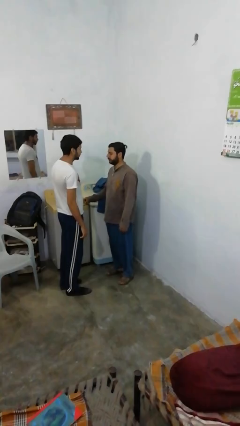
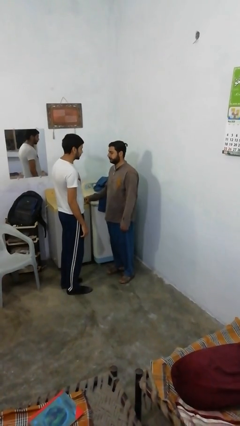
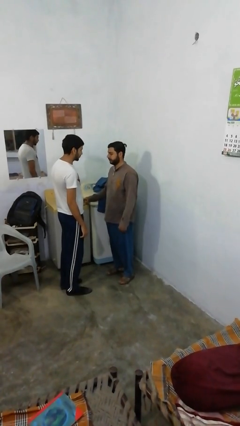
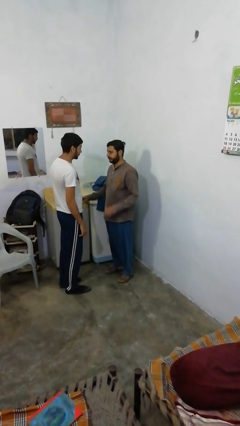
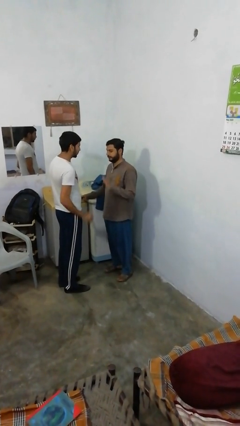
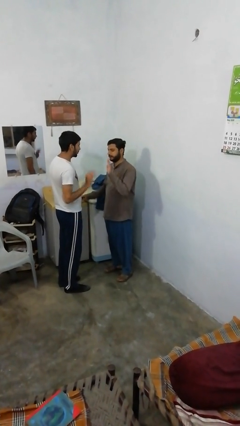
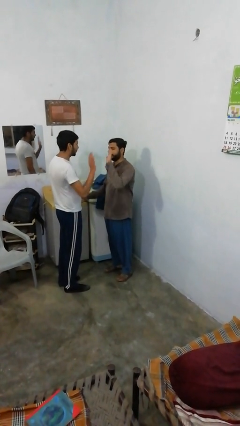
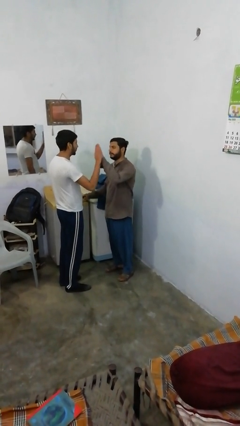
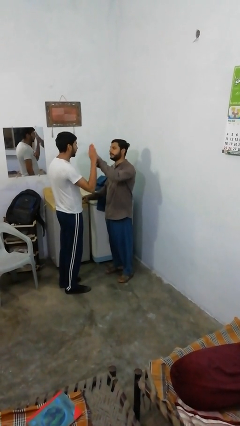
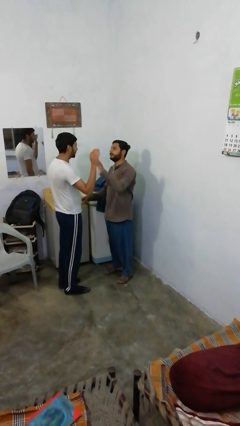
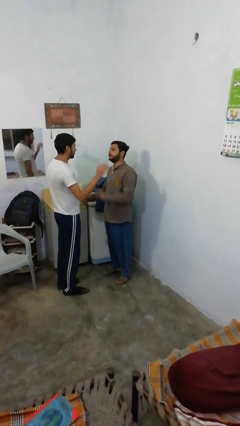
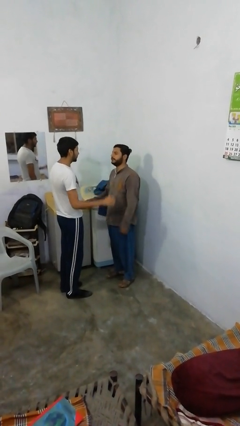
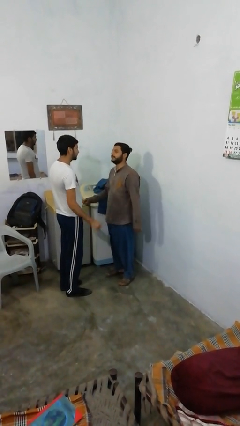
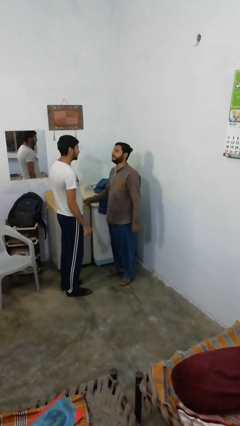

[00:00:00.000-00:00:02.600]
person highfives hand

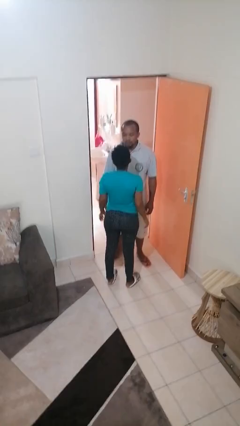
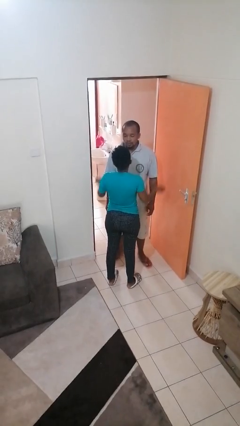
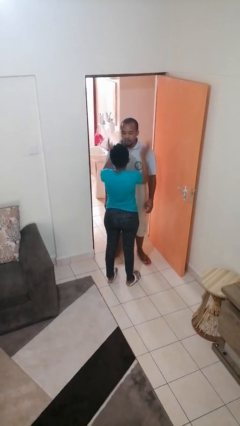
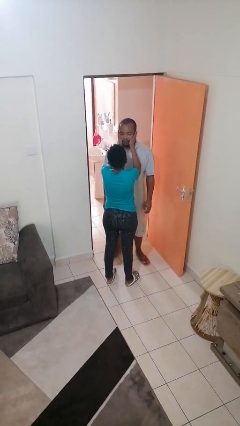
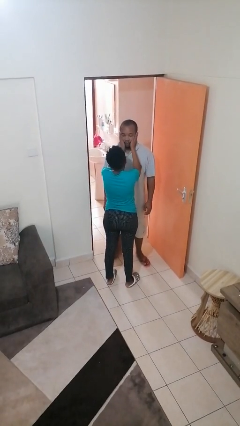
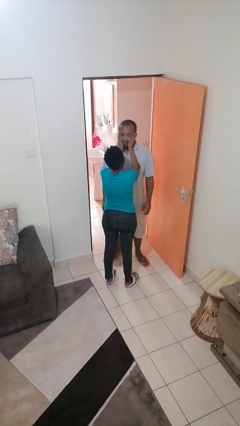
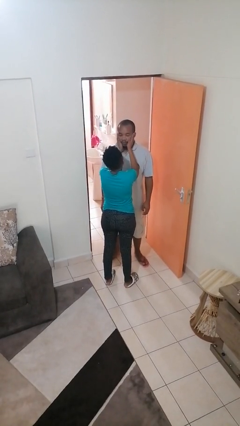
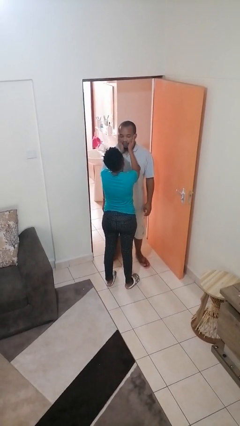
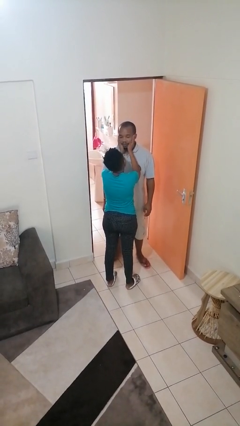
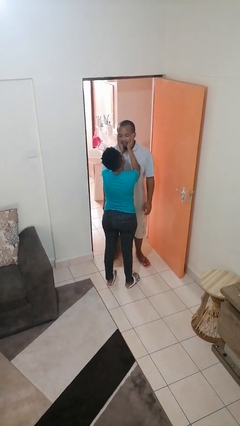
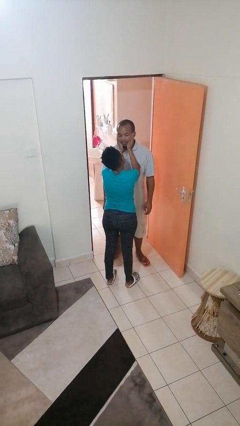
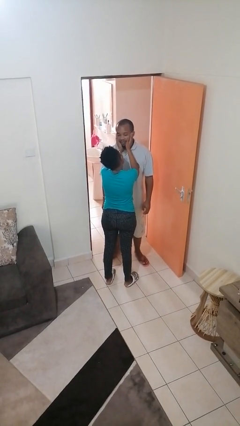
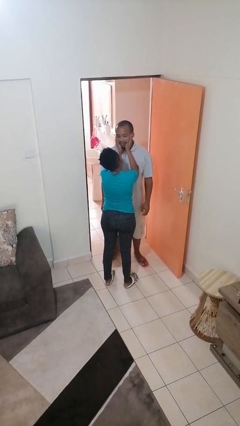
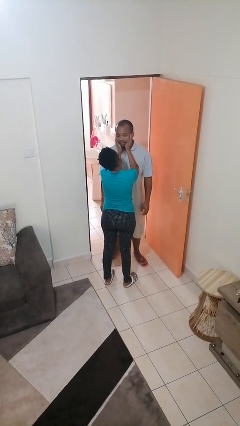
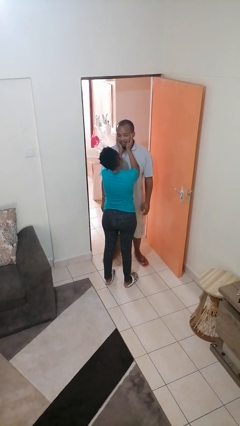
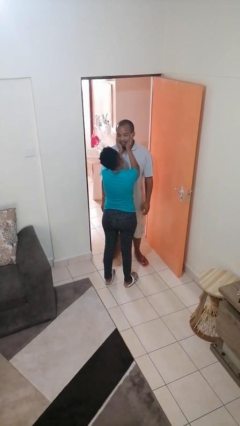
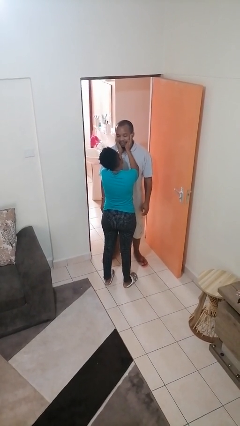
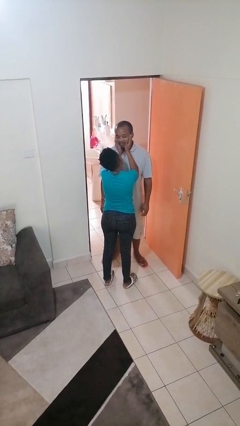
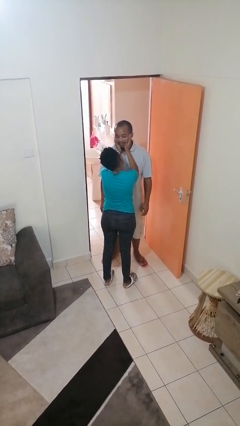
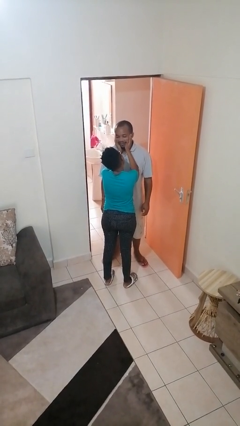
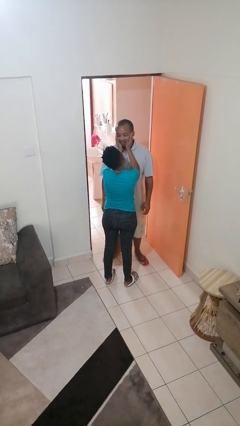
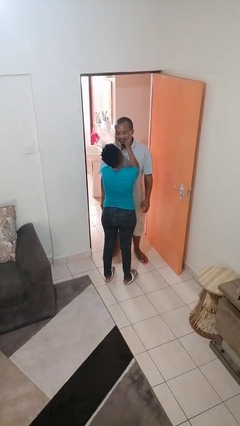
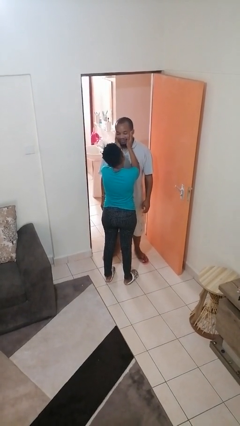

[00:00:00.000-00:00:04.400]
person touches face of person

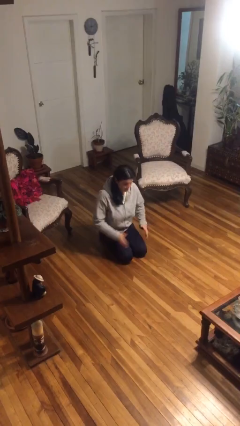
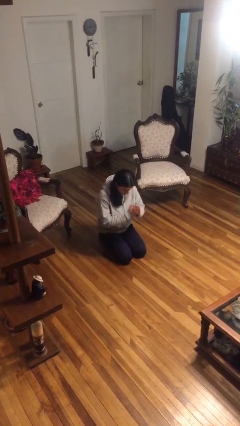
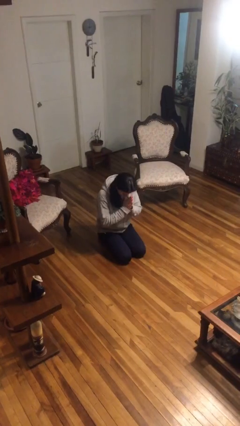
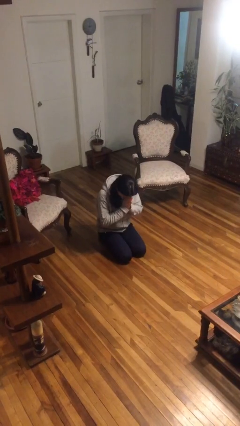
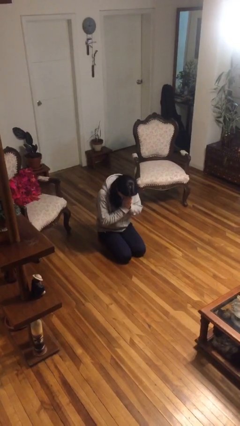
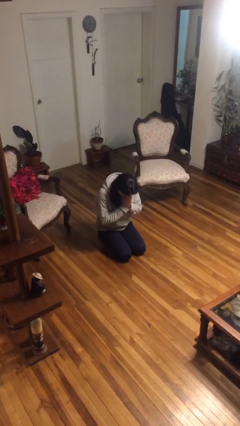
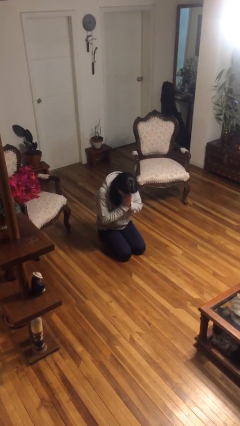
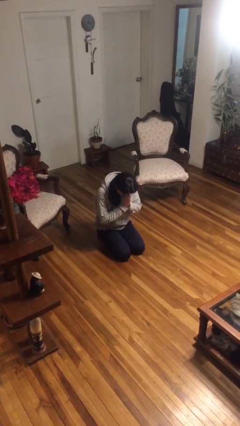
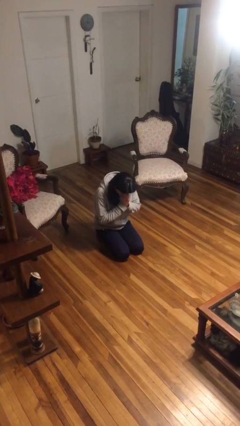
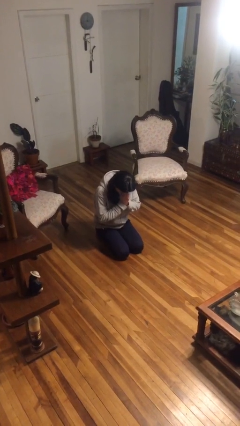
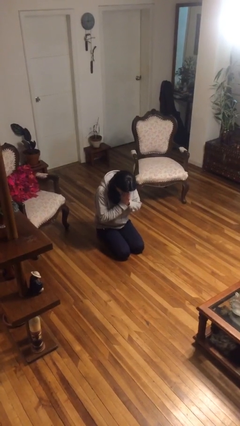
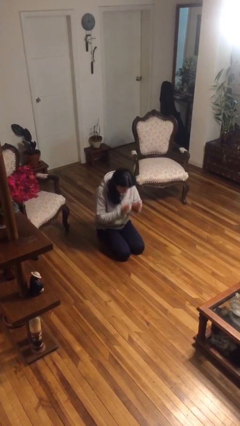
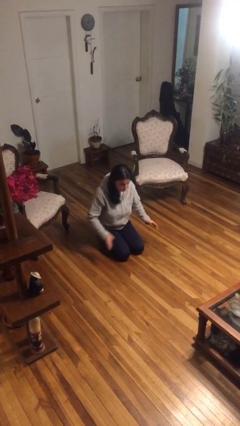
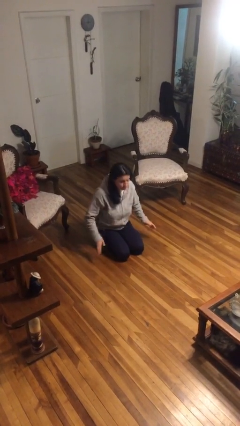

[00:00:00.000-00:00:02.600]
person prays

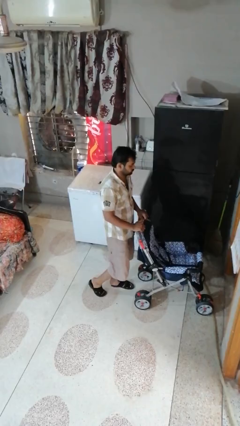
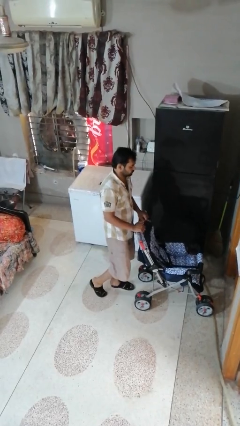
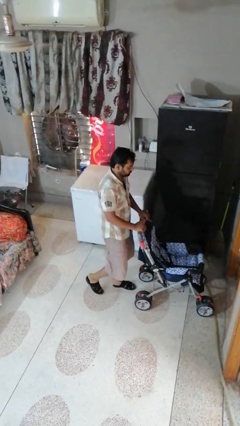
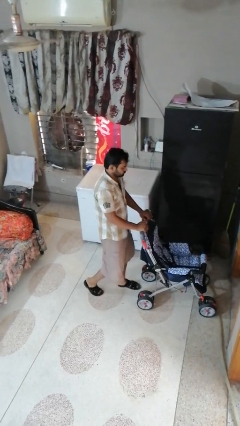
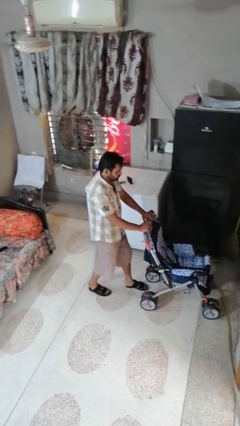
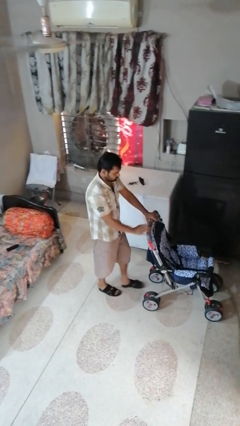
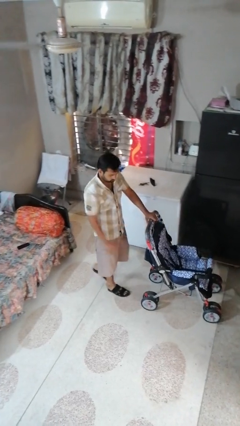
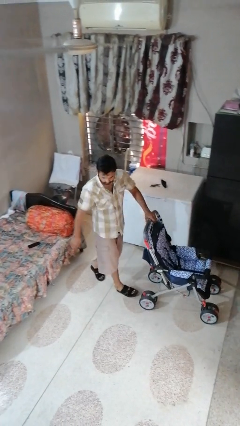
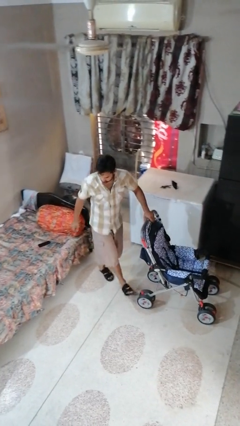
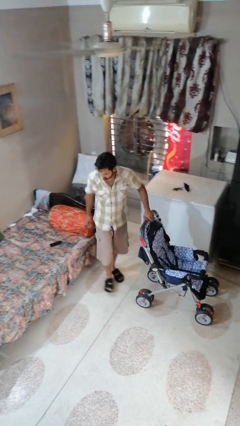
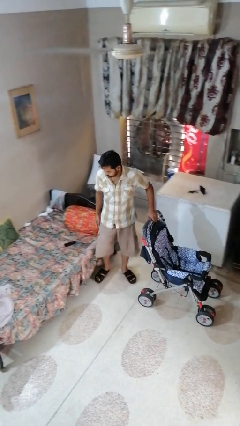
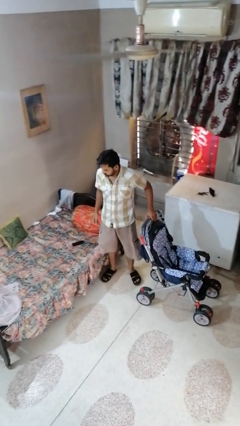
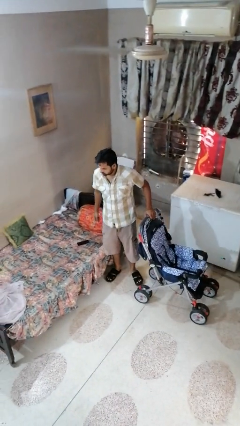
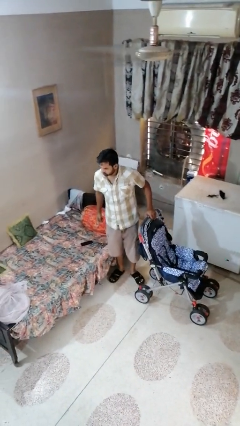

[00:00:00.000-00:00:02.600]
person pulls wheeled cart

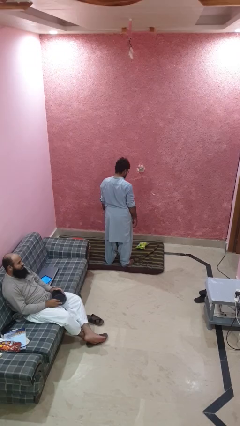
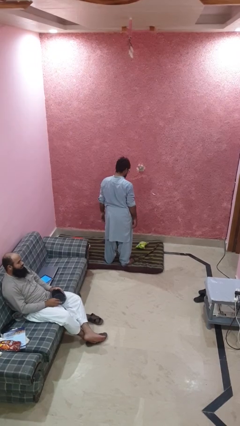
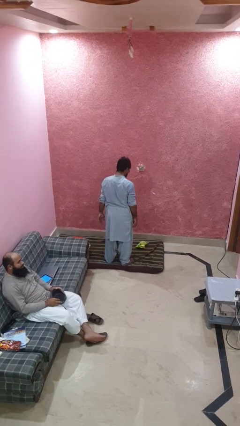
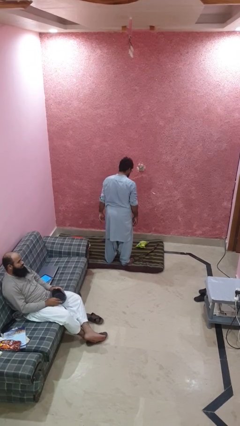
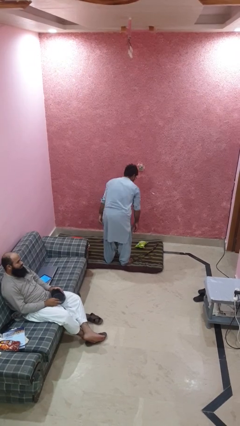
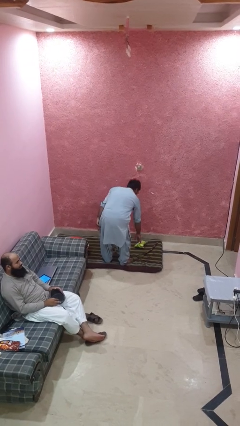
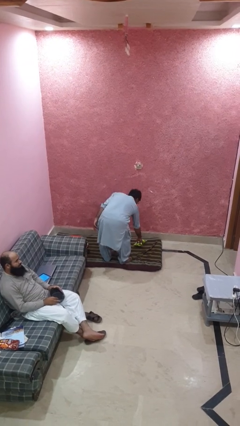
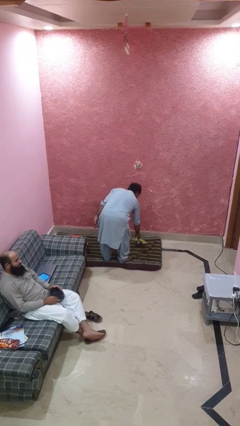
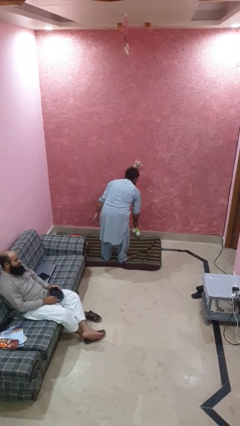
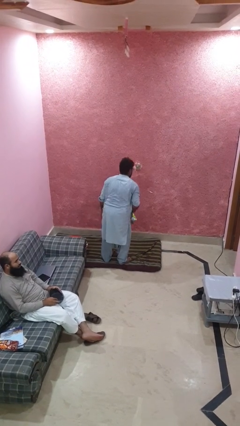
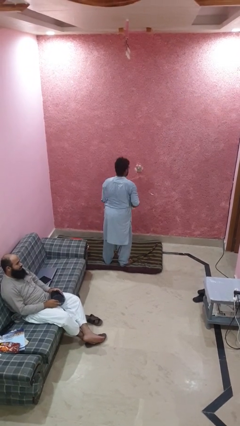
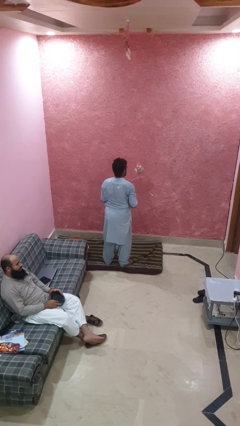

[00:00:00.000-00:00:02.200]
person picks up object from floor

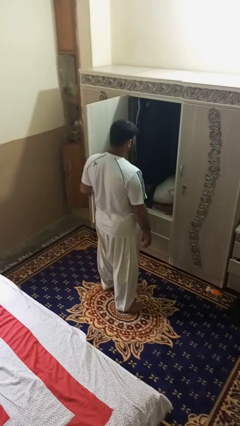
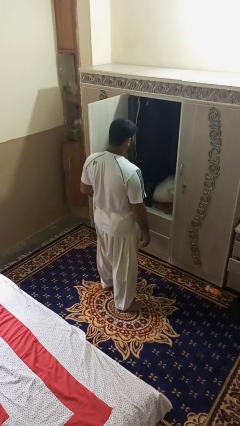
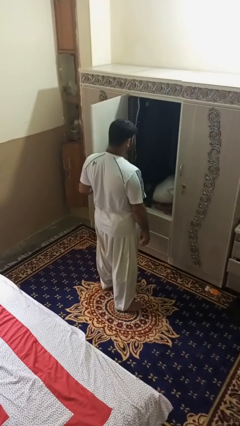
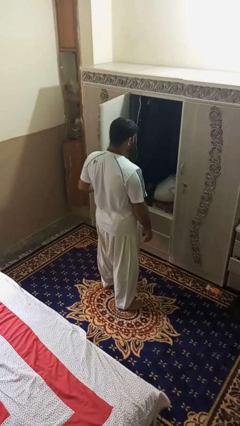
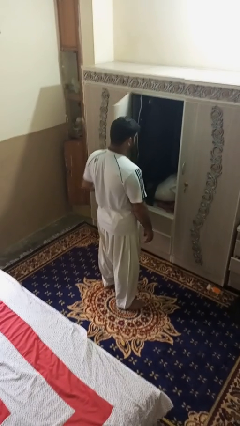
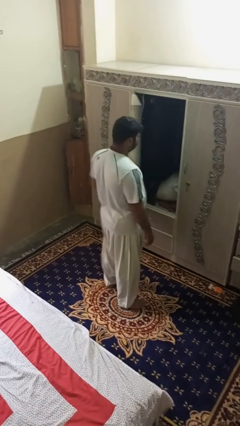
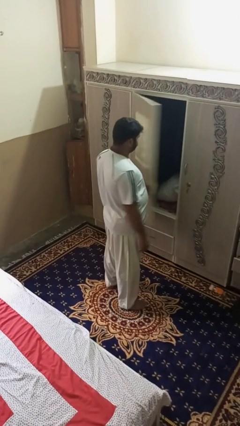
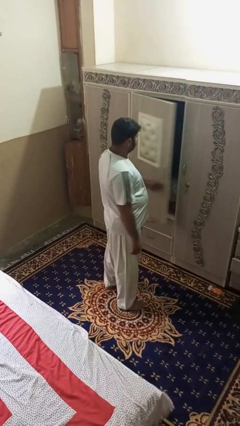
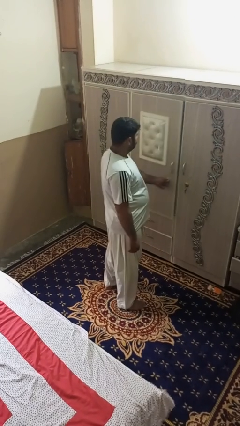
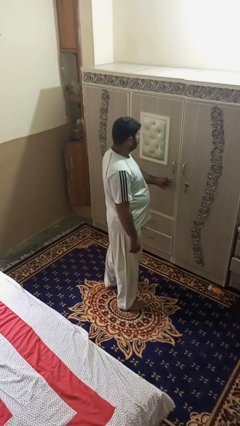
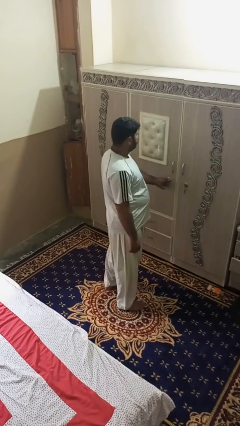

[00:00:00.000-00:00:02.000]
person closes dresser drawer

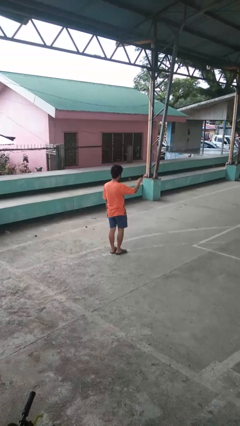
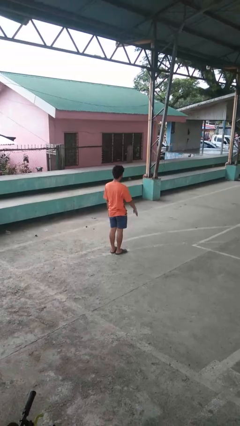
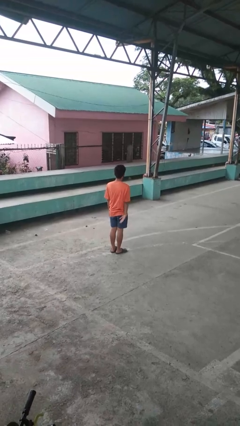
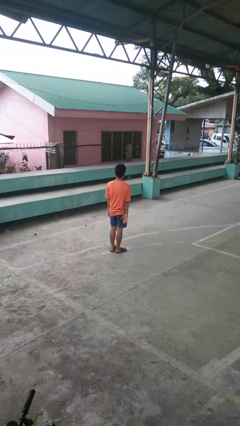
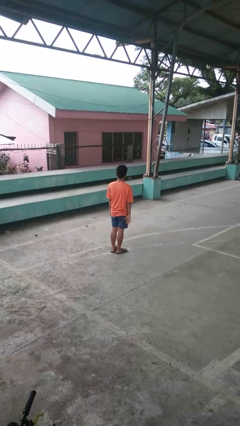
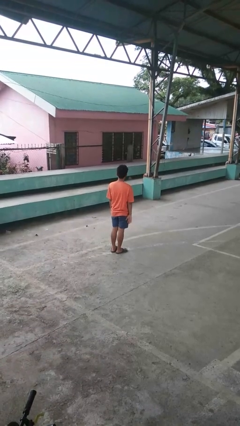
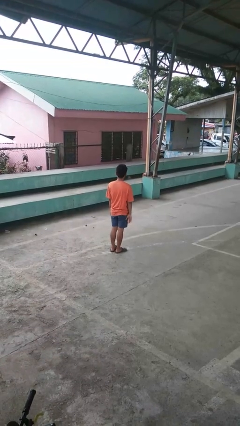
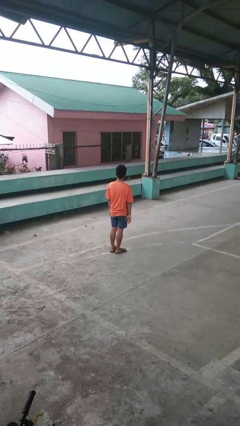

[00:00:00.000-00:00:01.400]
person gestures lower hand
